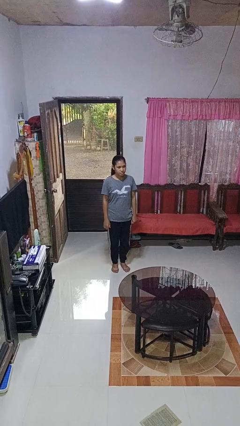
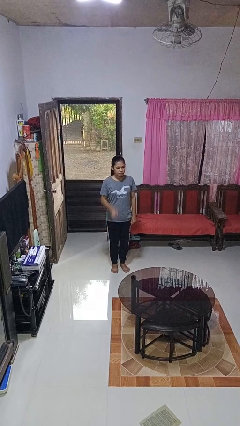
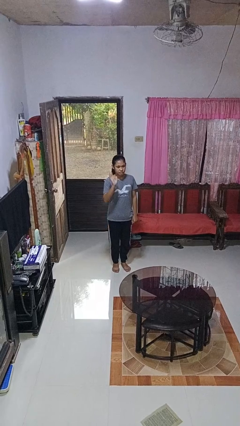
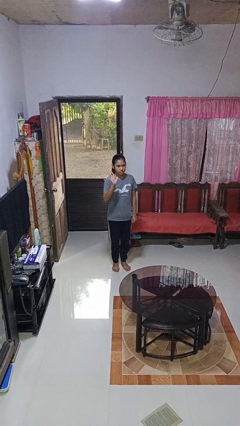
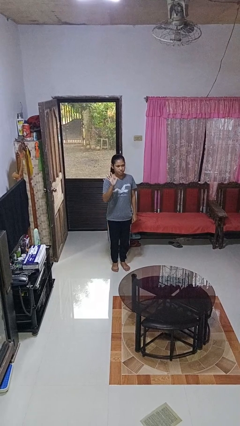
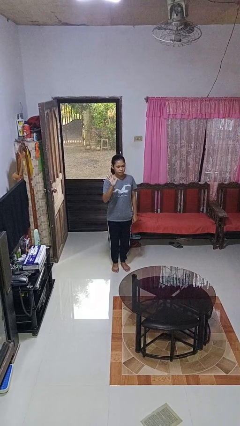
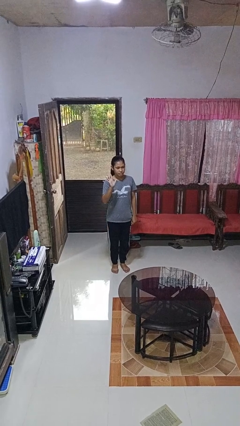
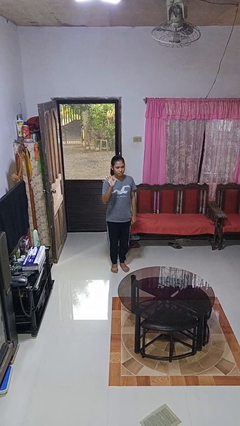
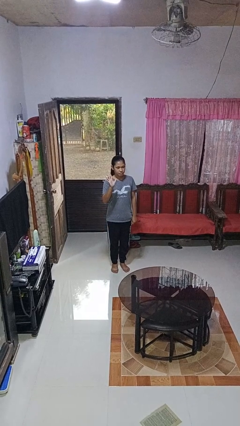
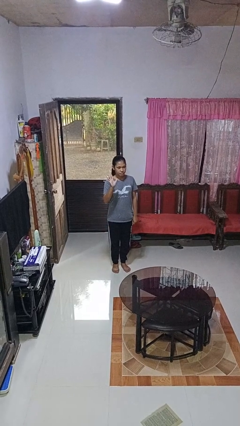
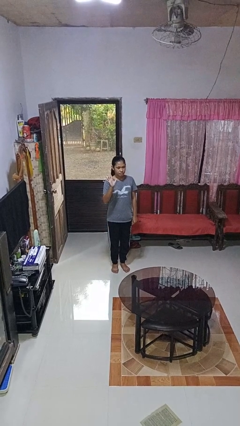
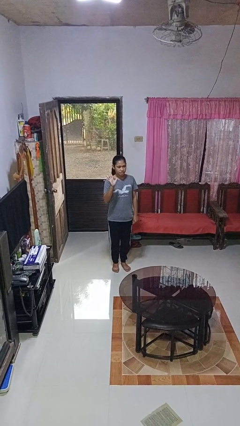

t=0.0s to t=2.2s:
person gestures number five

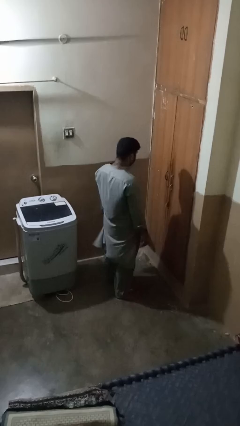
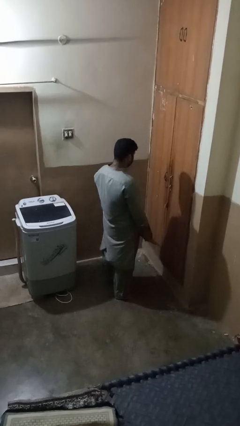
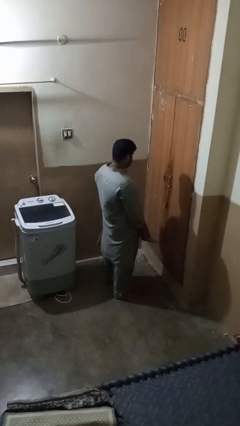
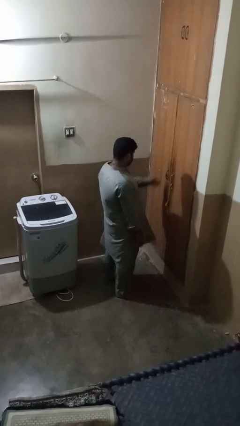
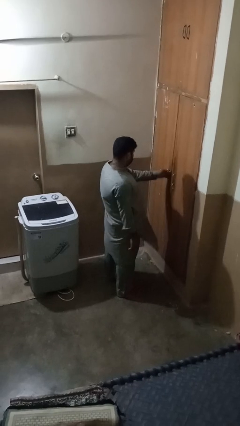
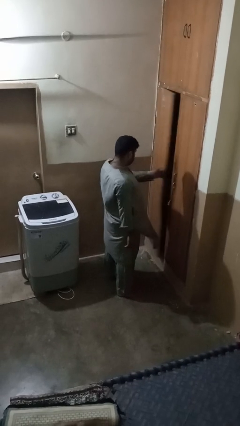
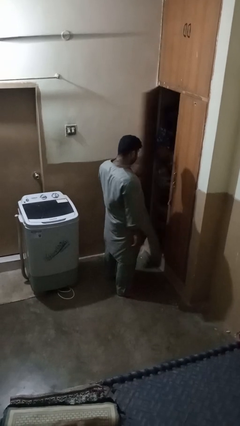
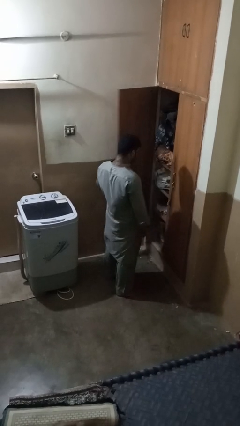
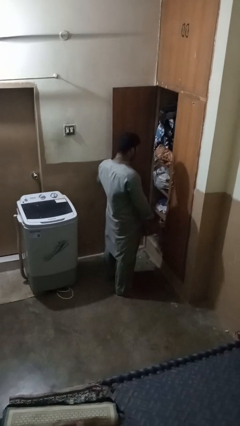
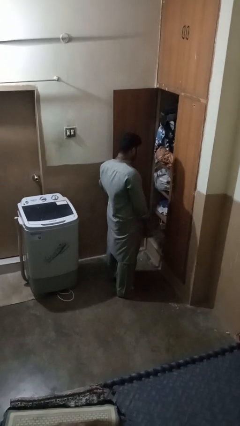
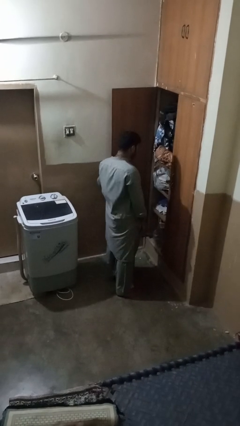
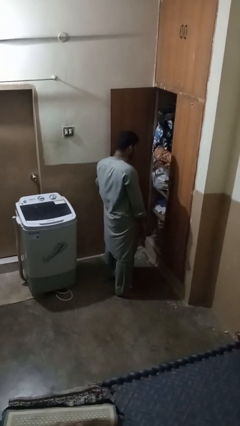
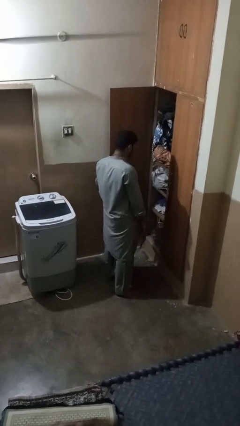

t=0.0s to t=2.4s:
person opens closet door

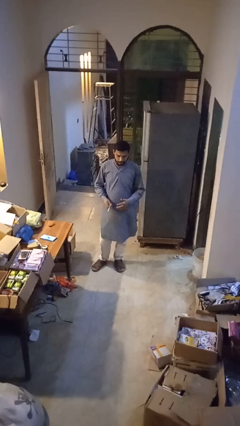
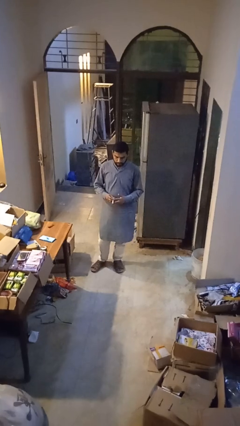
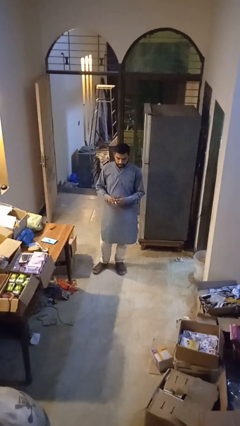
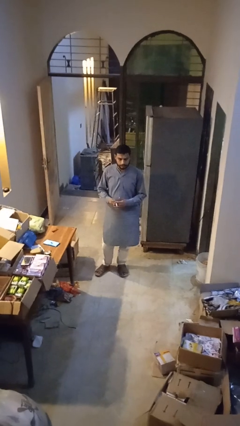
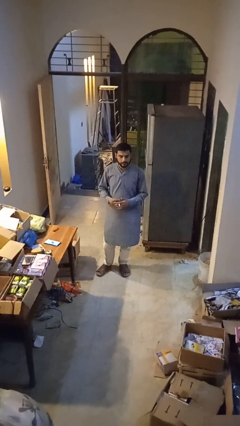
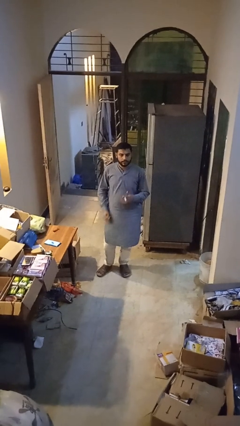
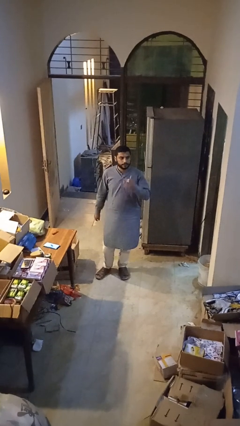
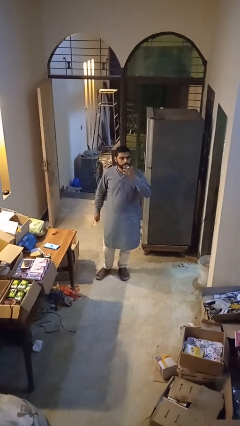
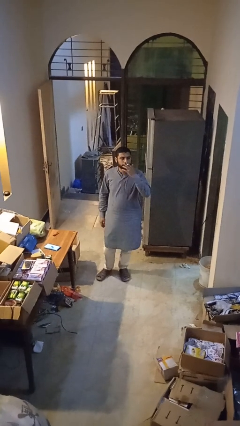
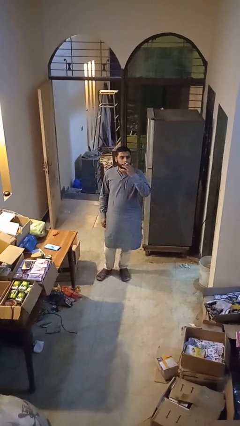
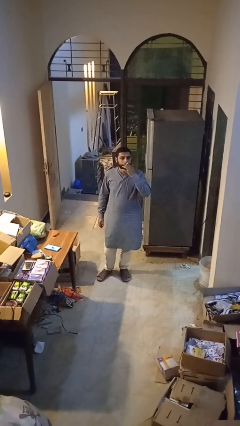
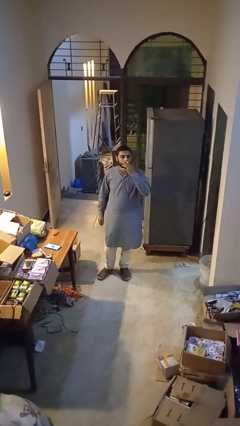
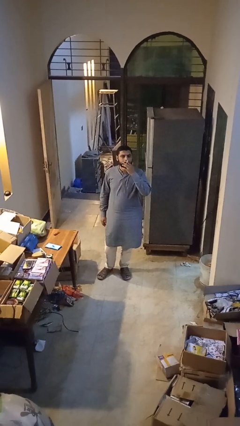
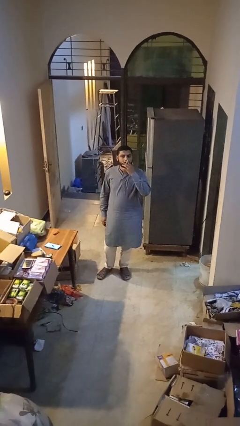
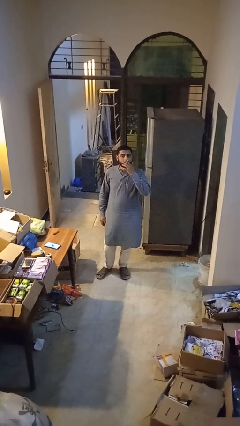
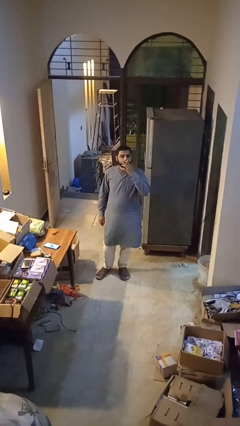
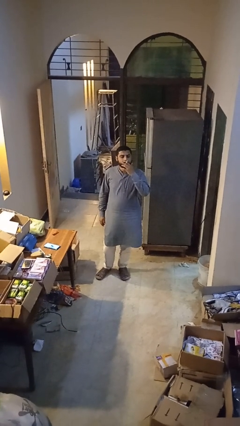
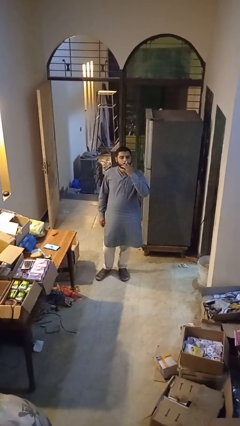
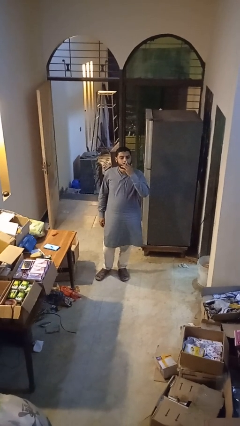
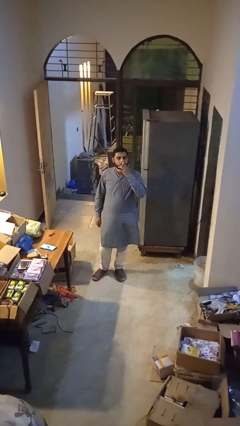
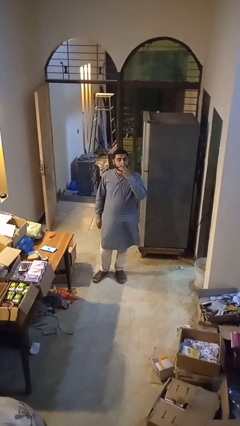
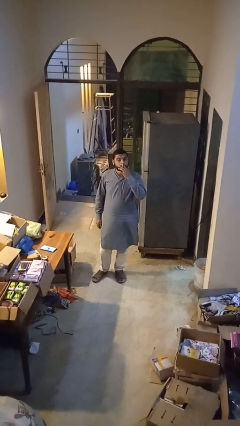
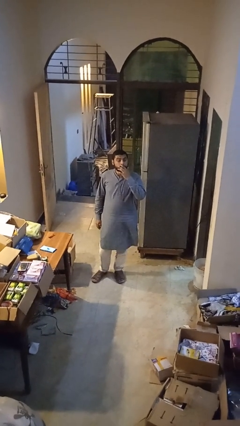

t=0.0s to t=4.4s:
person vapes

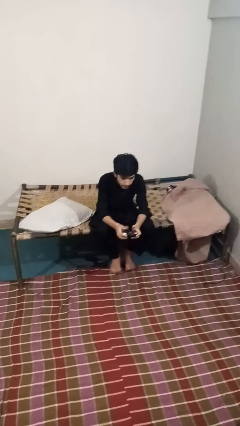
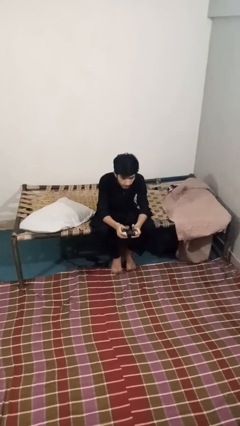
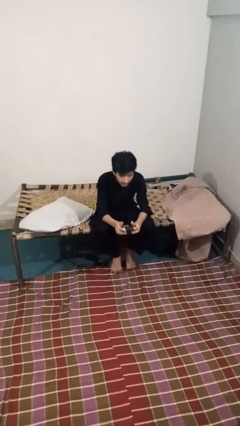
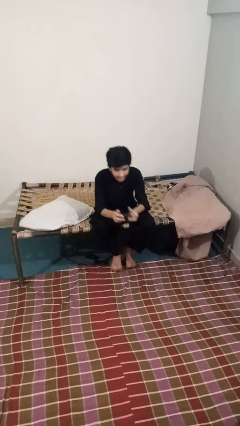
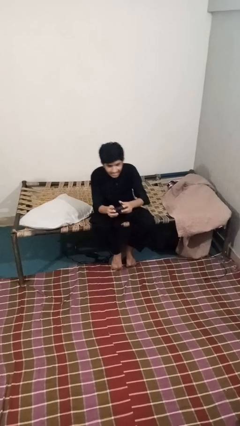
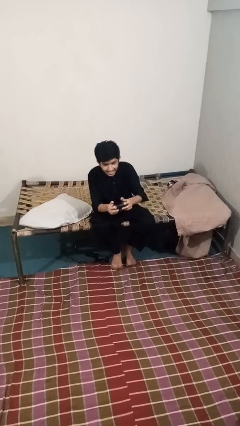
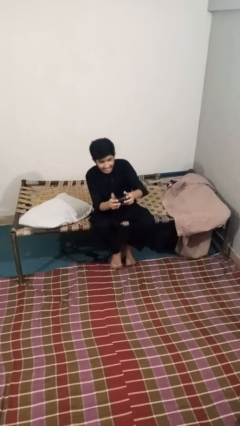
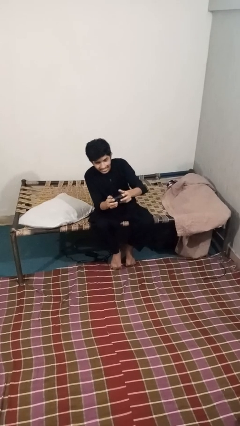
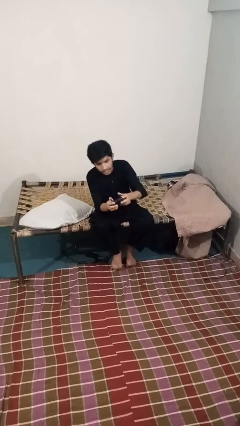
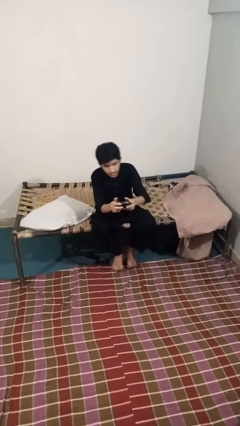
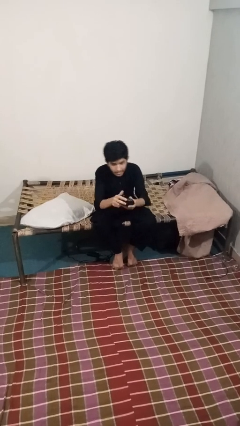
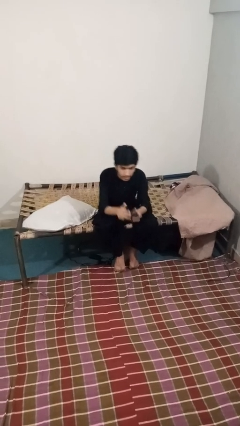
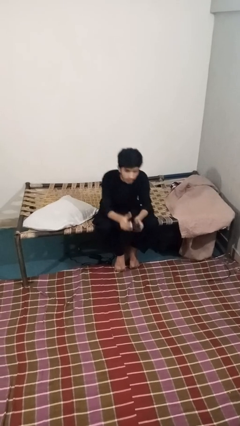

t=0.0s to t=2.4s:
person interacts with handheld game

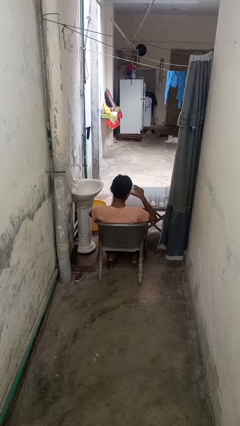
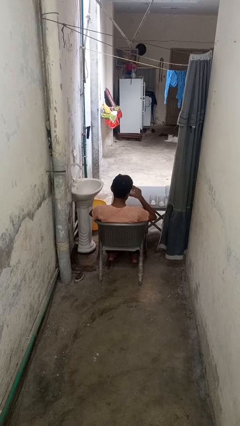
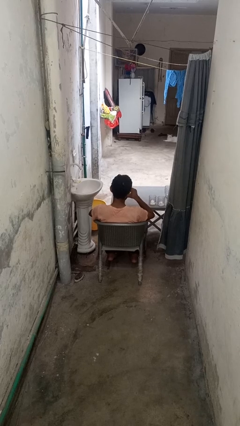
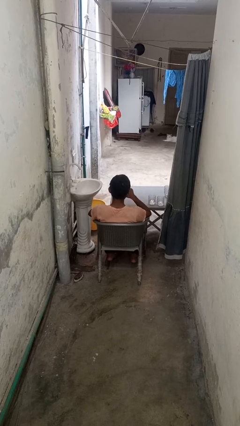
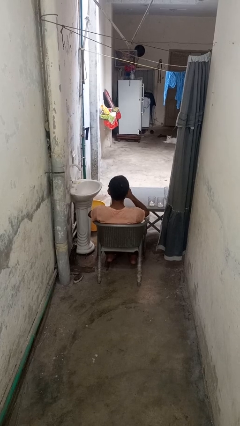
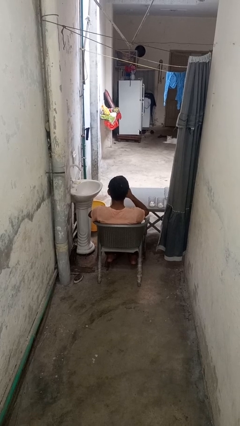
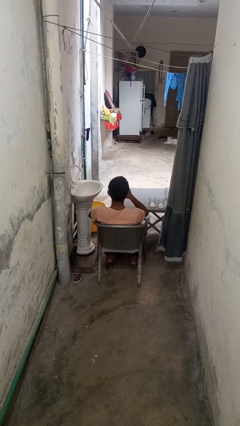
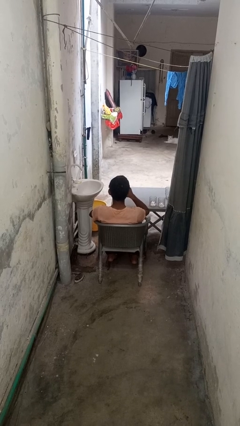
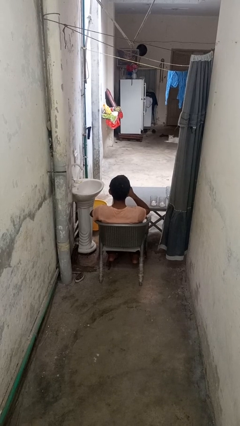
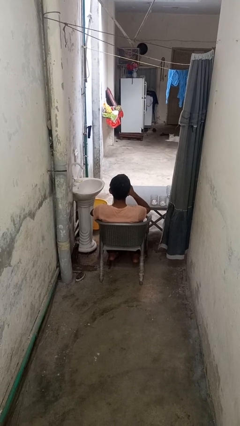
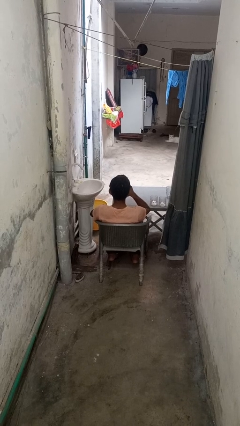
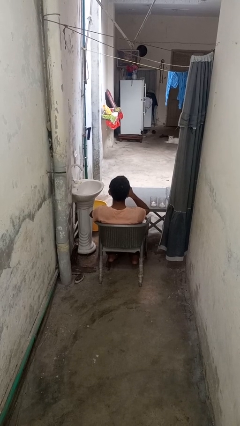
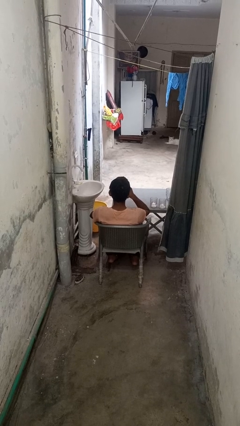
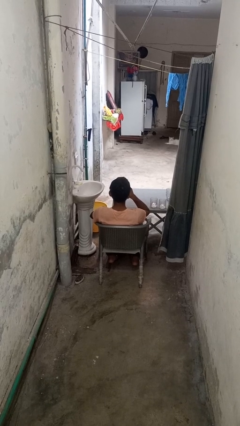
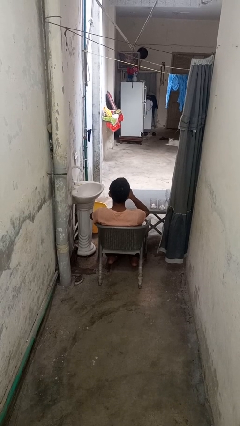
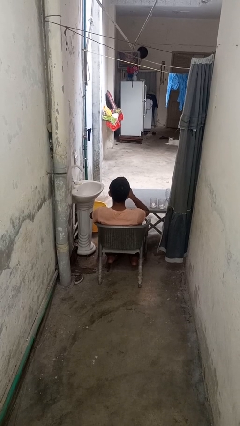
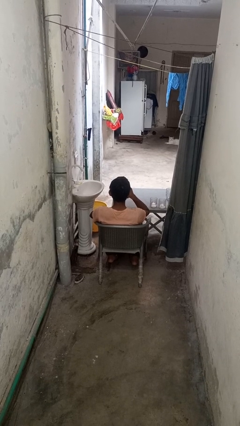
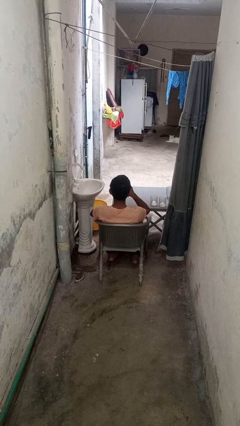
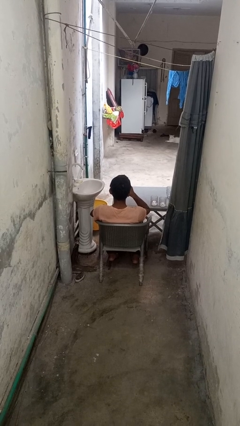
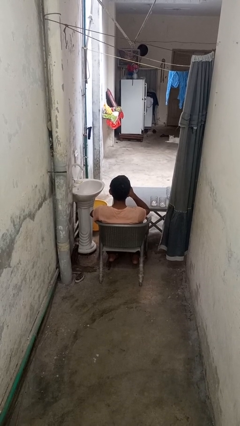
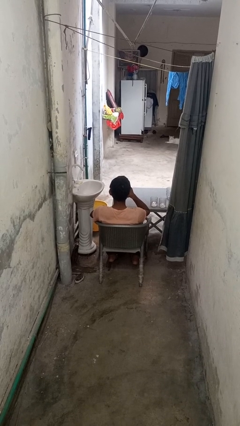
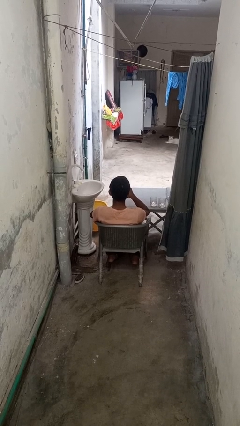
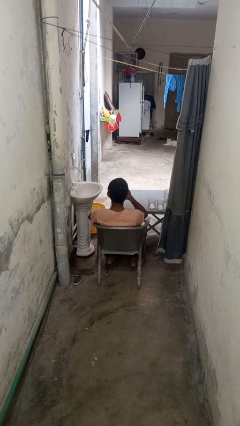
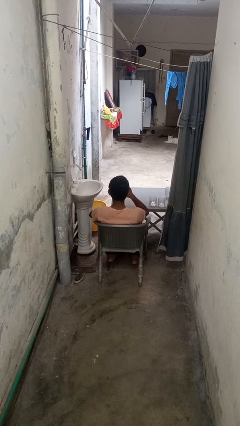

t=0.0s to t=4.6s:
person drinks from shotglass

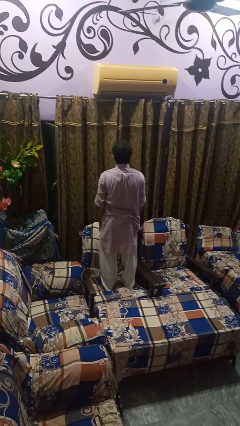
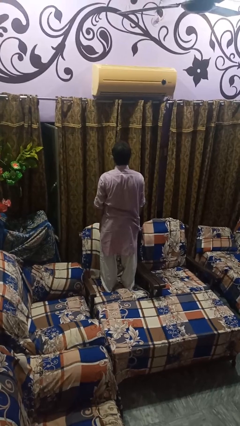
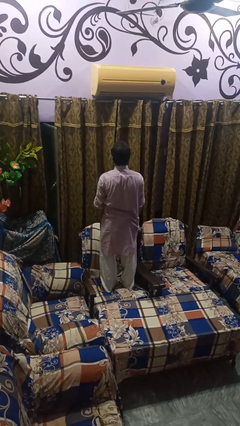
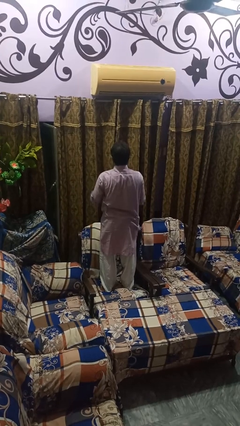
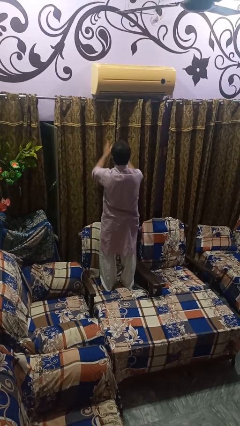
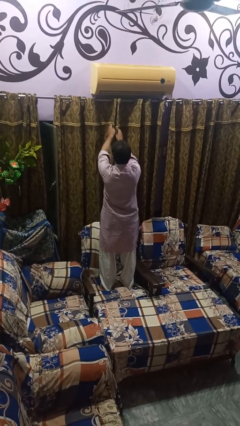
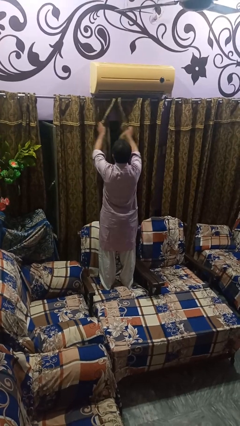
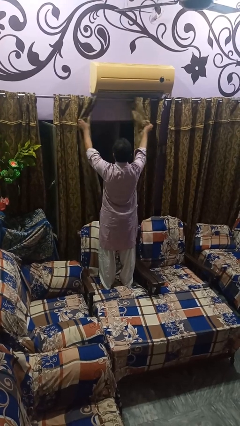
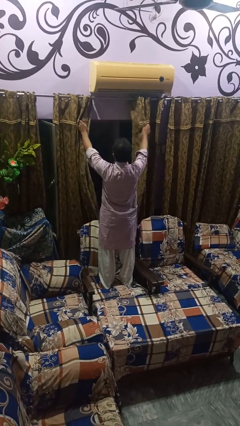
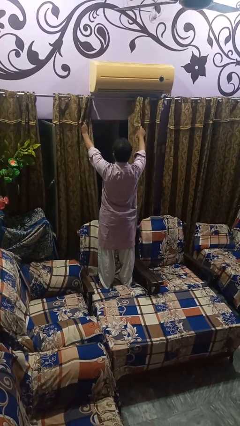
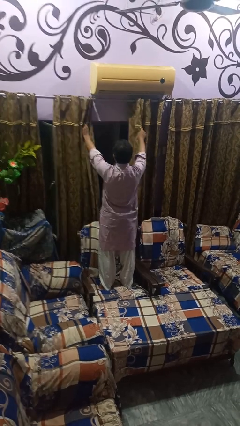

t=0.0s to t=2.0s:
person opens curtains
